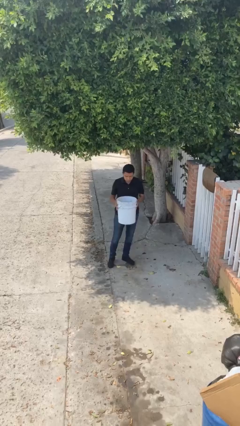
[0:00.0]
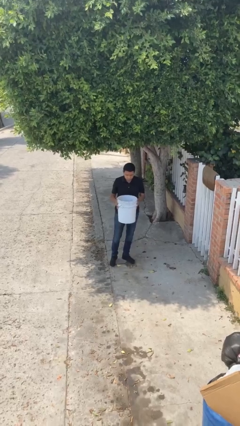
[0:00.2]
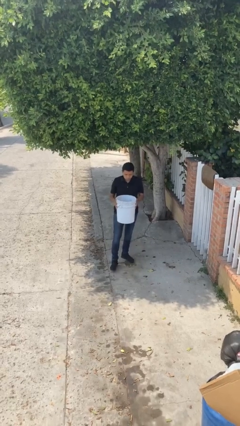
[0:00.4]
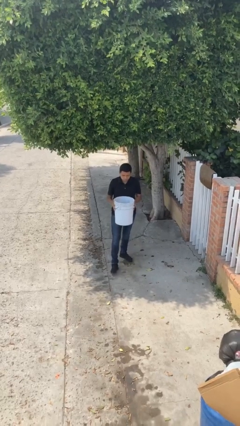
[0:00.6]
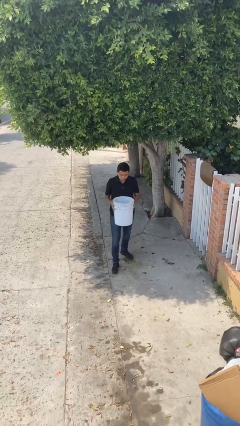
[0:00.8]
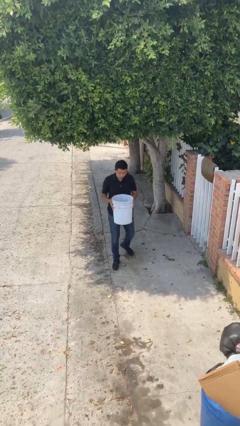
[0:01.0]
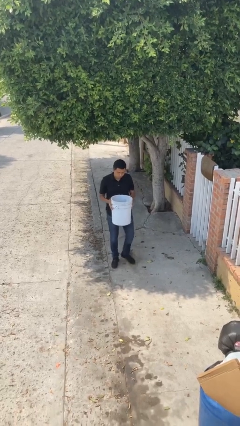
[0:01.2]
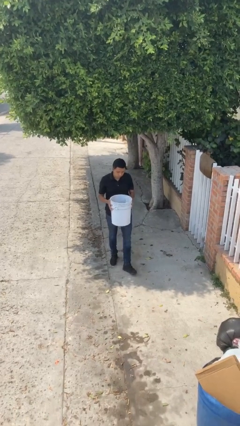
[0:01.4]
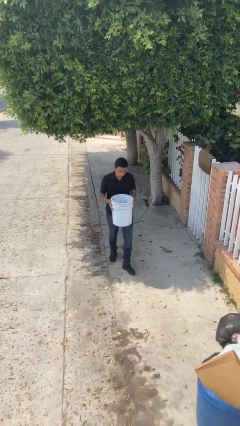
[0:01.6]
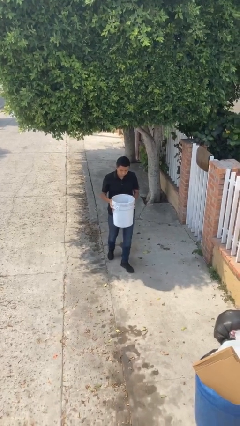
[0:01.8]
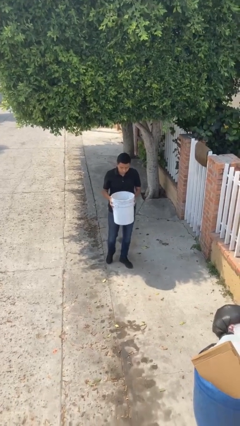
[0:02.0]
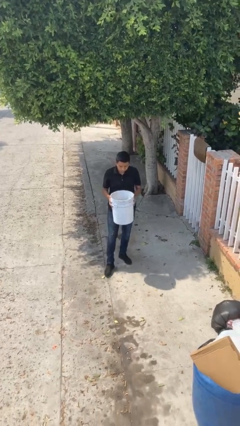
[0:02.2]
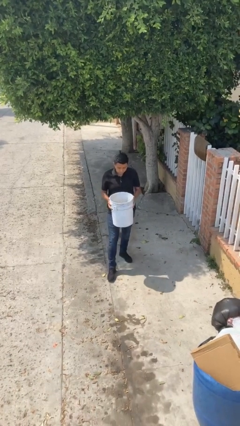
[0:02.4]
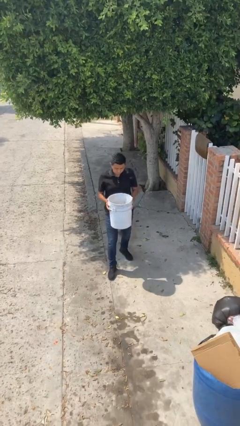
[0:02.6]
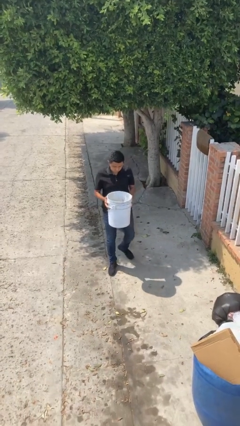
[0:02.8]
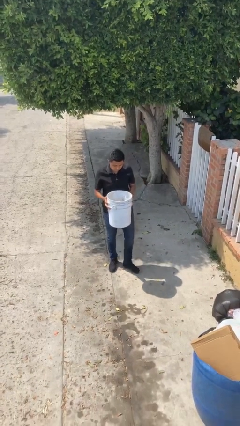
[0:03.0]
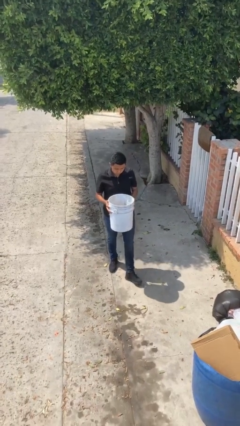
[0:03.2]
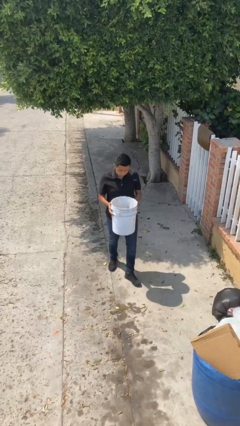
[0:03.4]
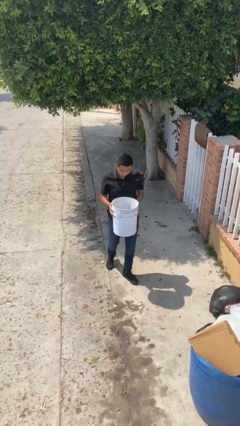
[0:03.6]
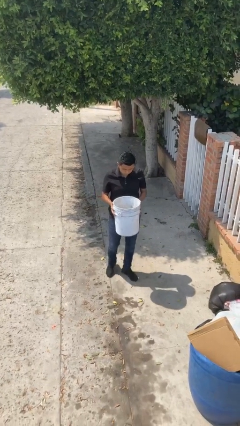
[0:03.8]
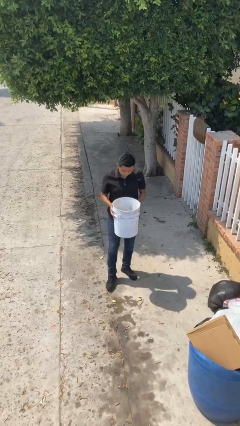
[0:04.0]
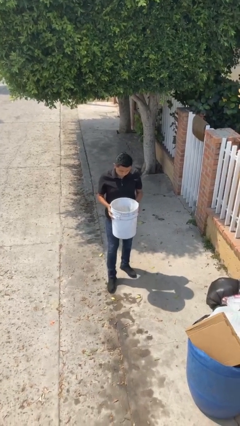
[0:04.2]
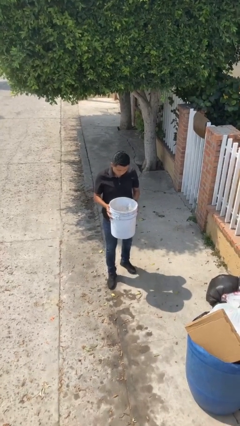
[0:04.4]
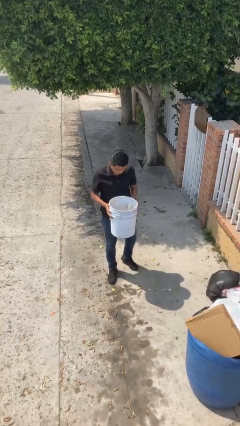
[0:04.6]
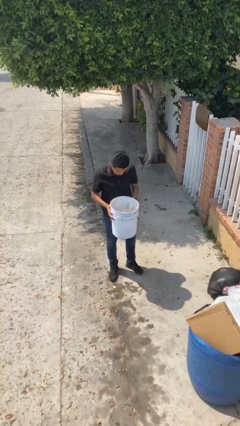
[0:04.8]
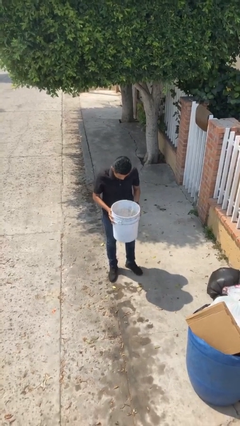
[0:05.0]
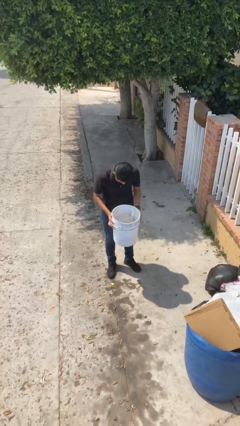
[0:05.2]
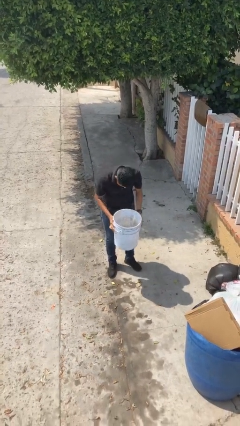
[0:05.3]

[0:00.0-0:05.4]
person carries heavy object

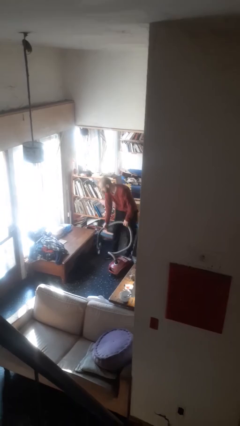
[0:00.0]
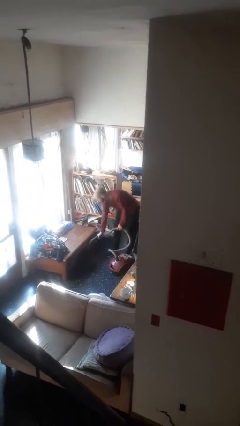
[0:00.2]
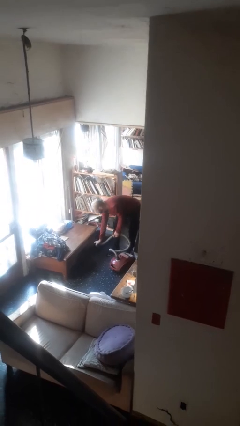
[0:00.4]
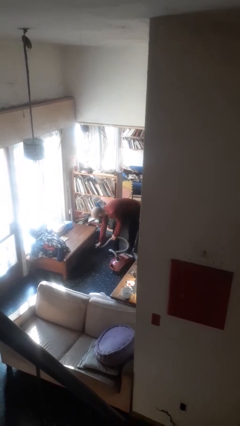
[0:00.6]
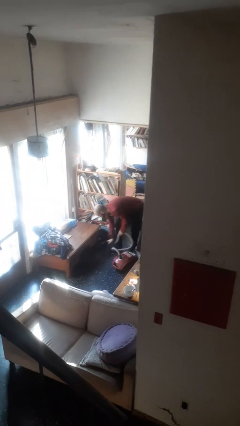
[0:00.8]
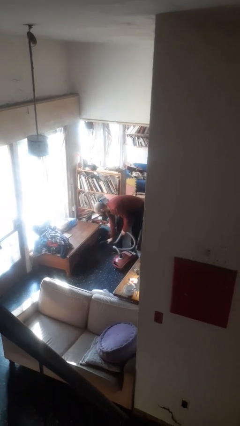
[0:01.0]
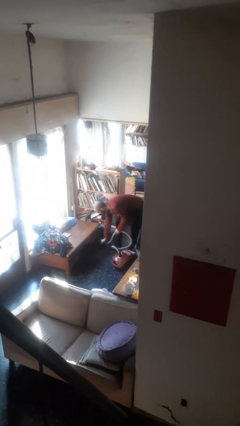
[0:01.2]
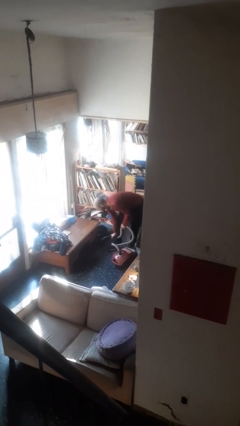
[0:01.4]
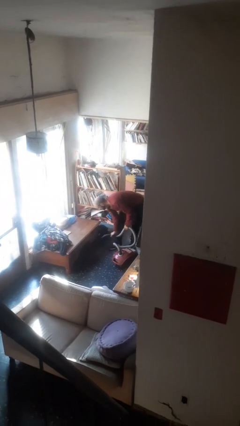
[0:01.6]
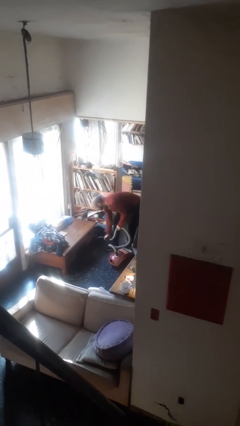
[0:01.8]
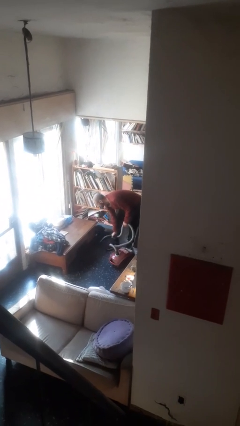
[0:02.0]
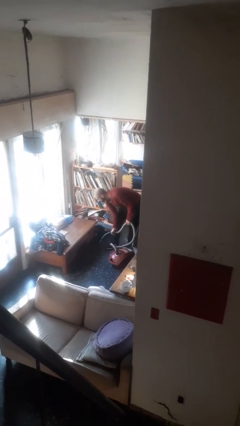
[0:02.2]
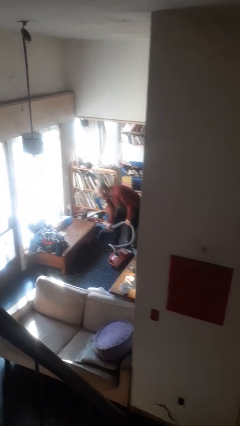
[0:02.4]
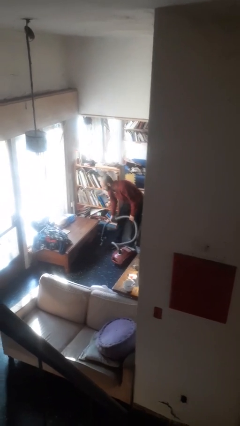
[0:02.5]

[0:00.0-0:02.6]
person vacuums carpet

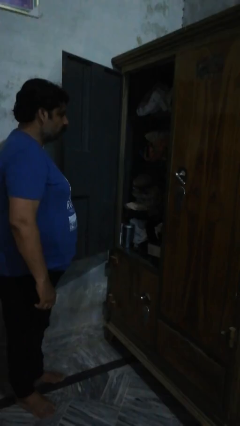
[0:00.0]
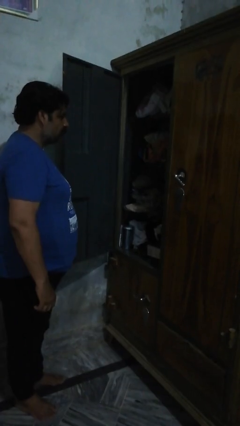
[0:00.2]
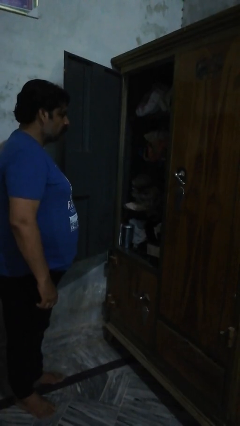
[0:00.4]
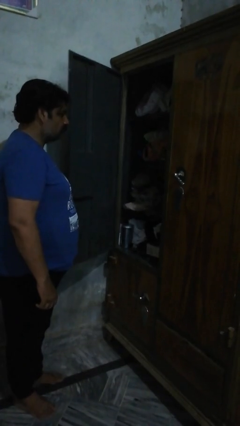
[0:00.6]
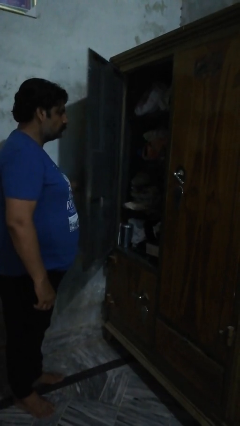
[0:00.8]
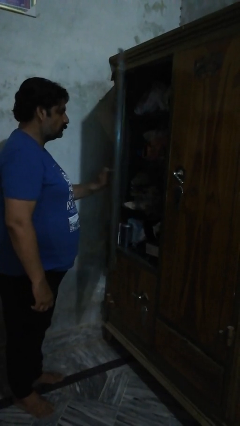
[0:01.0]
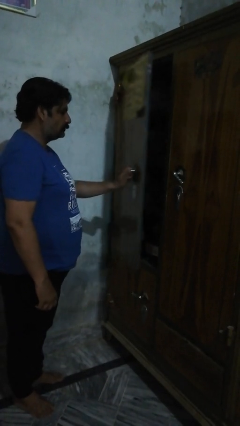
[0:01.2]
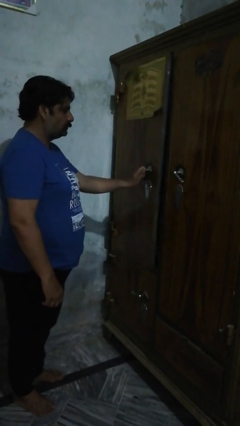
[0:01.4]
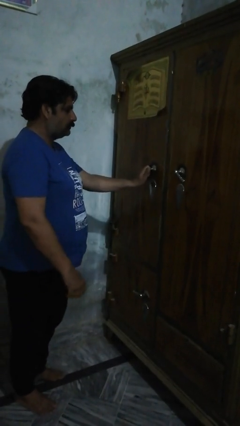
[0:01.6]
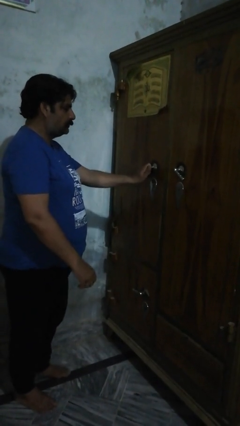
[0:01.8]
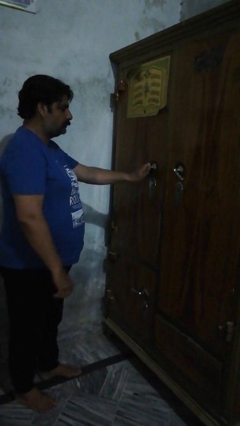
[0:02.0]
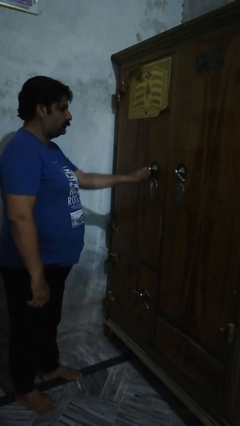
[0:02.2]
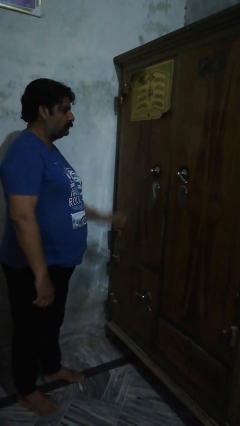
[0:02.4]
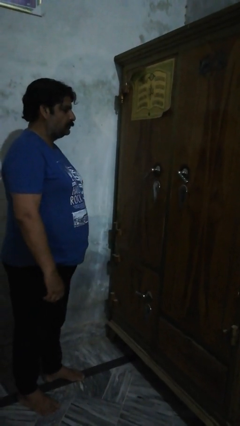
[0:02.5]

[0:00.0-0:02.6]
person closes dresser drawer

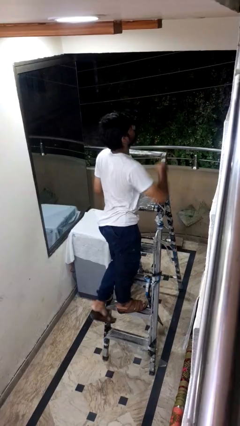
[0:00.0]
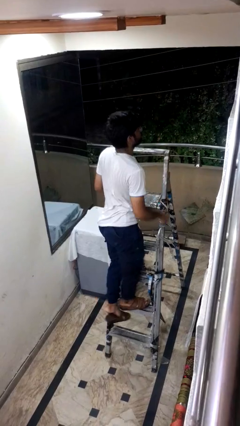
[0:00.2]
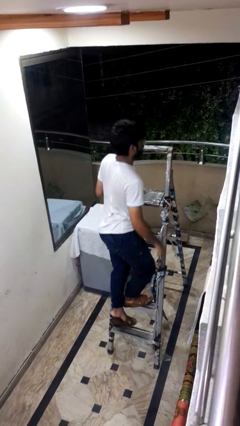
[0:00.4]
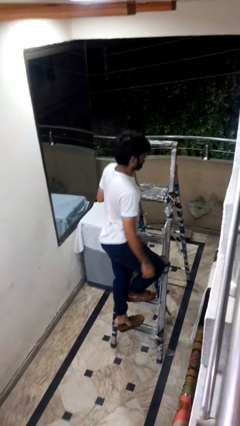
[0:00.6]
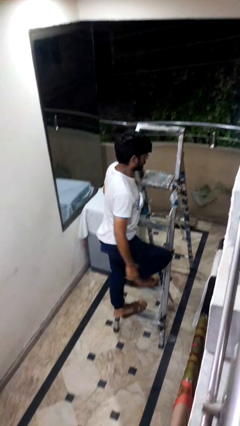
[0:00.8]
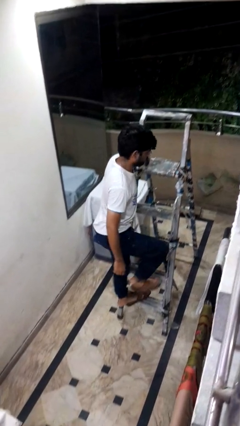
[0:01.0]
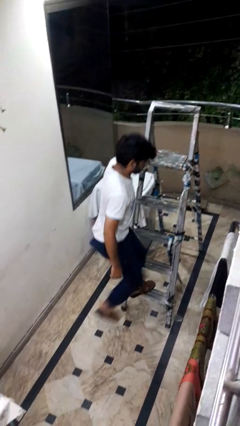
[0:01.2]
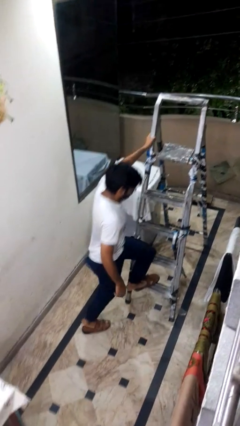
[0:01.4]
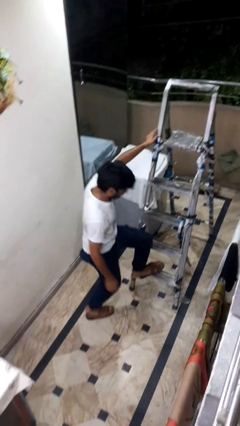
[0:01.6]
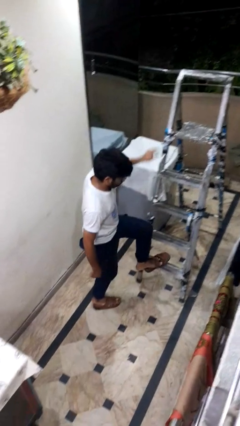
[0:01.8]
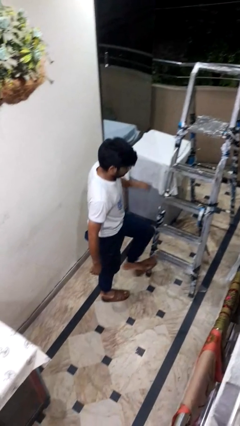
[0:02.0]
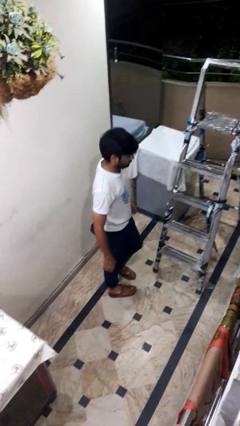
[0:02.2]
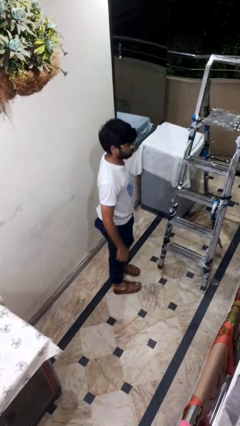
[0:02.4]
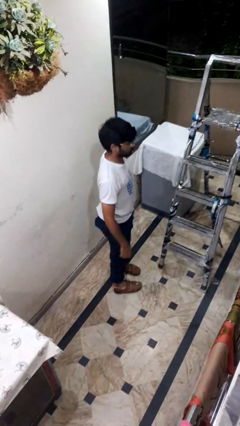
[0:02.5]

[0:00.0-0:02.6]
person climbs down ladder

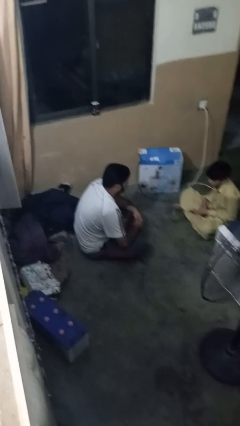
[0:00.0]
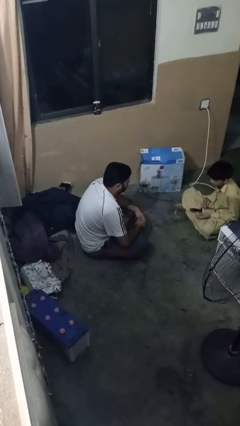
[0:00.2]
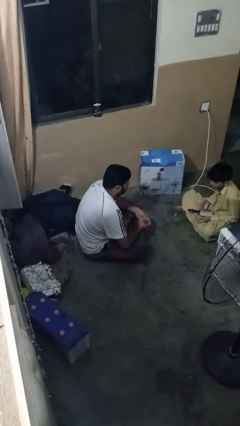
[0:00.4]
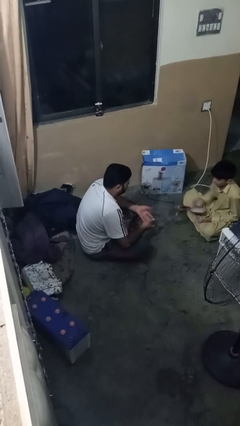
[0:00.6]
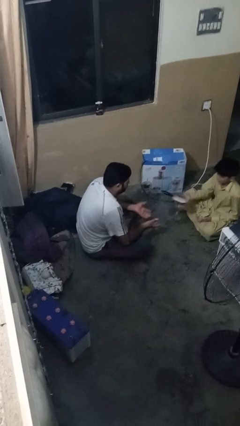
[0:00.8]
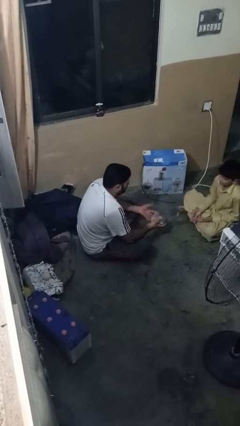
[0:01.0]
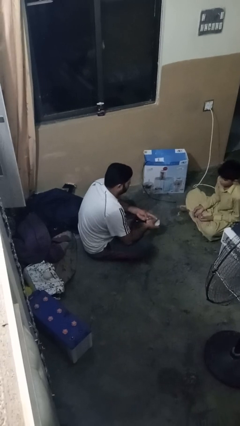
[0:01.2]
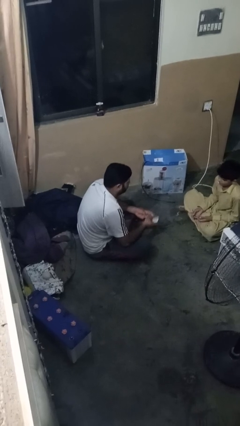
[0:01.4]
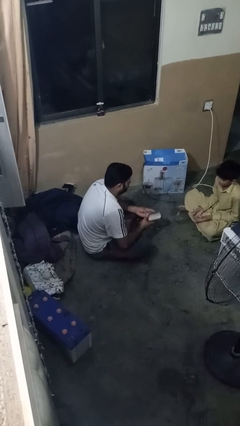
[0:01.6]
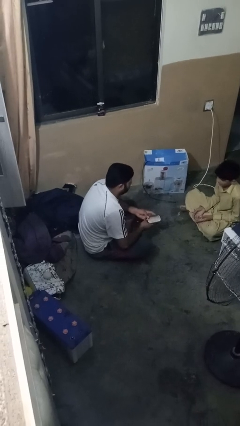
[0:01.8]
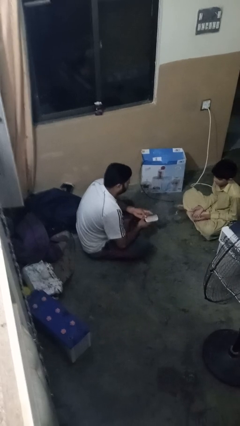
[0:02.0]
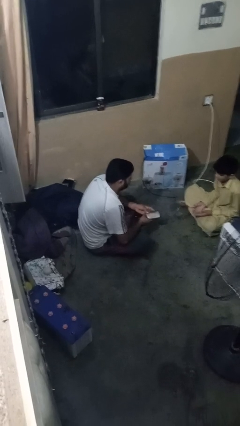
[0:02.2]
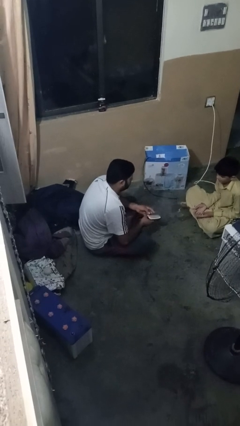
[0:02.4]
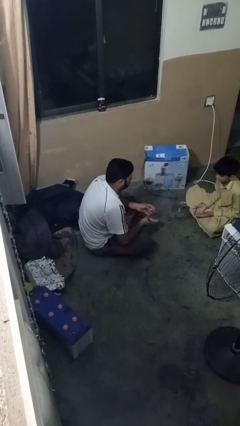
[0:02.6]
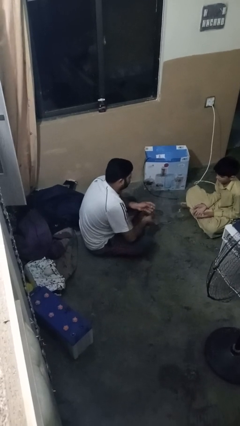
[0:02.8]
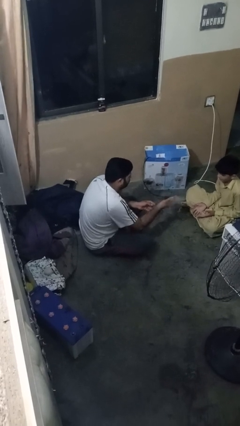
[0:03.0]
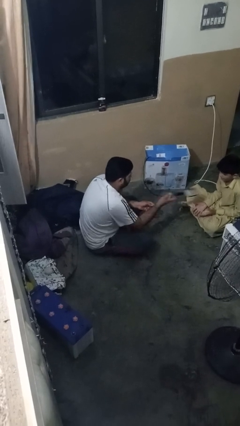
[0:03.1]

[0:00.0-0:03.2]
person catches object from person

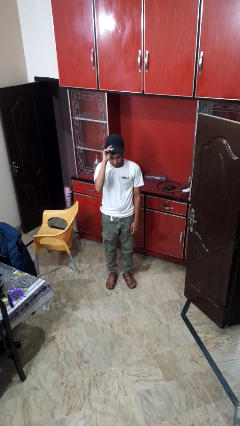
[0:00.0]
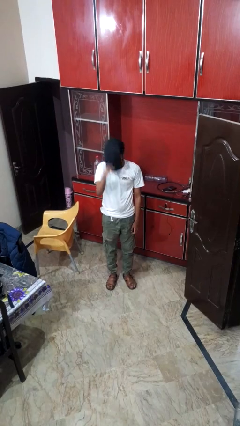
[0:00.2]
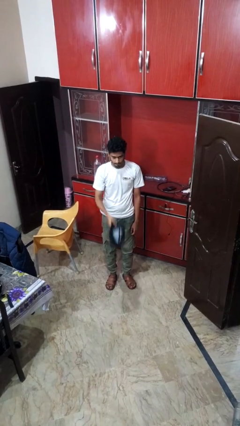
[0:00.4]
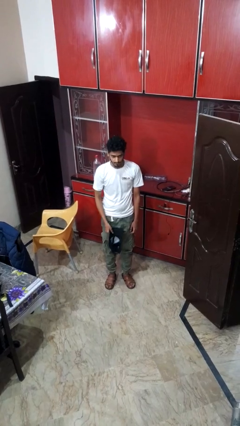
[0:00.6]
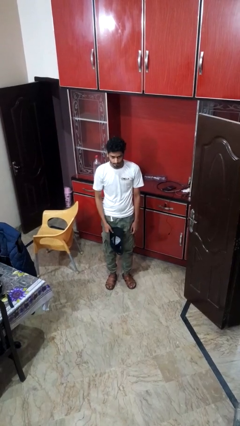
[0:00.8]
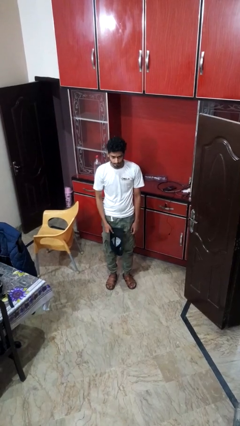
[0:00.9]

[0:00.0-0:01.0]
person takes off hat

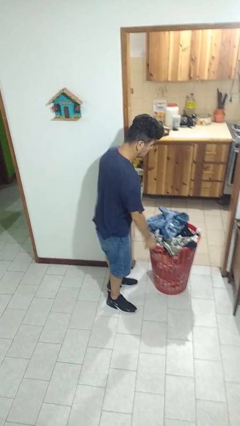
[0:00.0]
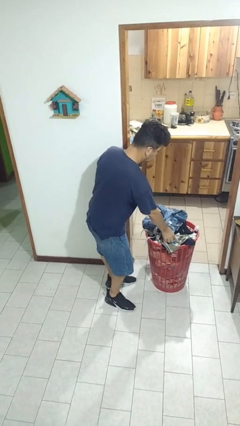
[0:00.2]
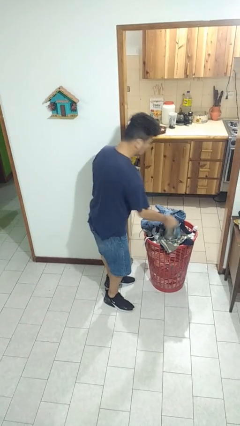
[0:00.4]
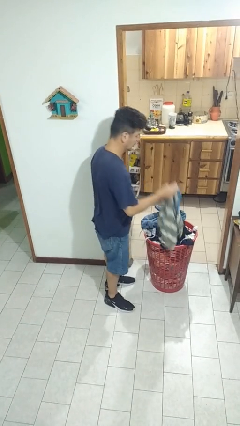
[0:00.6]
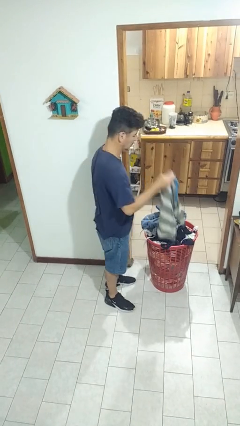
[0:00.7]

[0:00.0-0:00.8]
person takes object from basket
